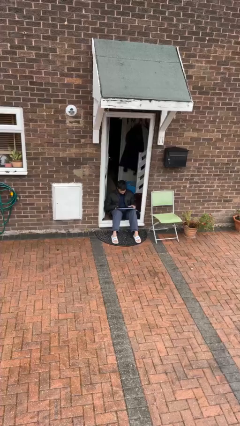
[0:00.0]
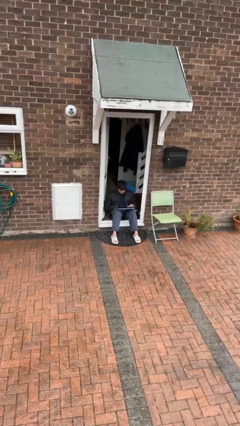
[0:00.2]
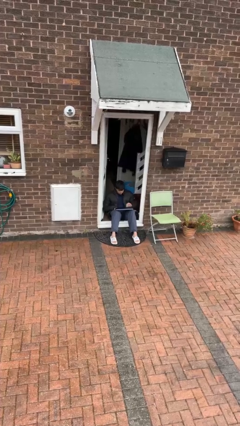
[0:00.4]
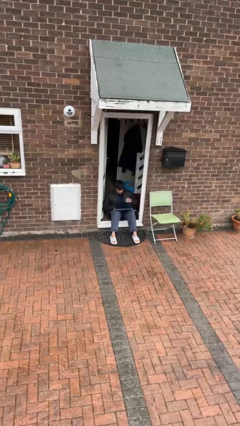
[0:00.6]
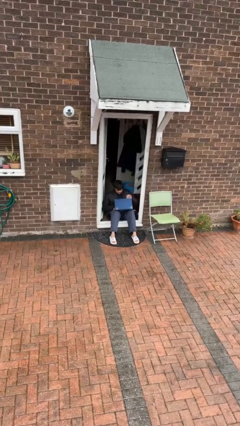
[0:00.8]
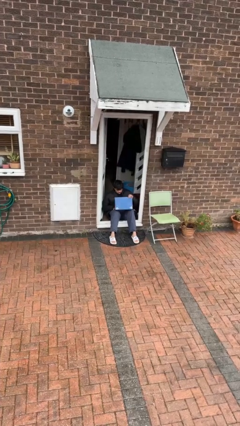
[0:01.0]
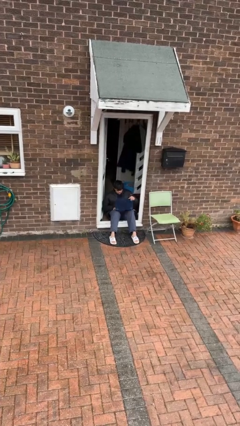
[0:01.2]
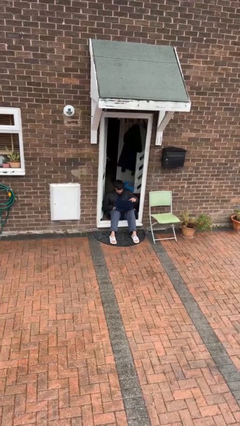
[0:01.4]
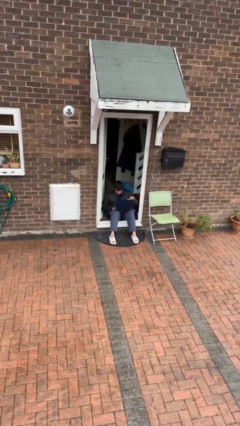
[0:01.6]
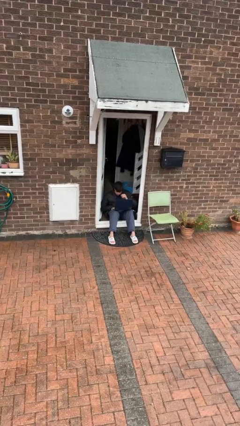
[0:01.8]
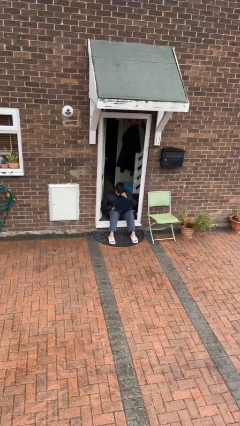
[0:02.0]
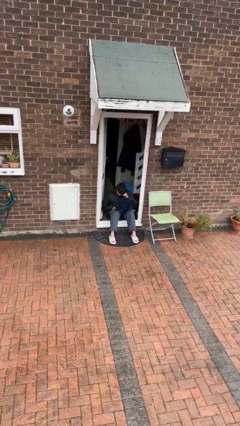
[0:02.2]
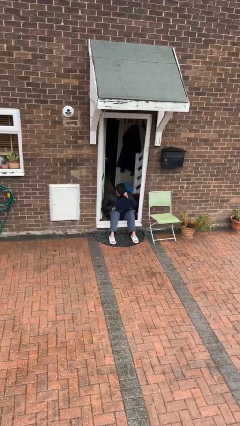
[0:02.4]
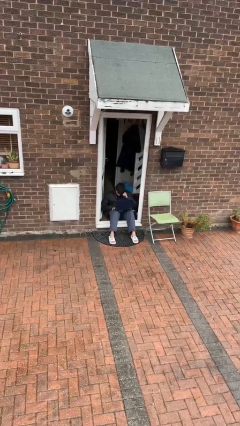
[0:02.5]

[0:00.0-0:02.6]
person opens laptop

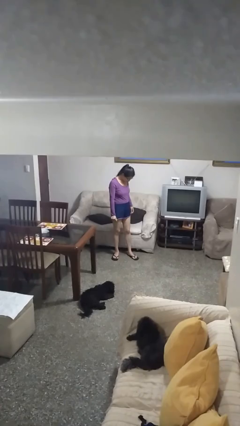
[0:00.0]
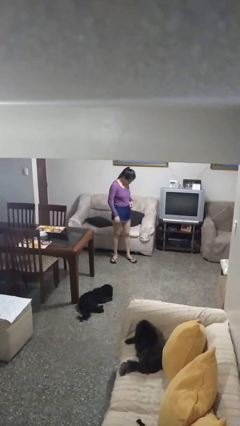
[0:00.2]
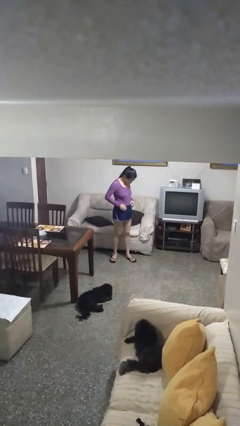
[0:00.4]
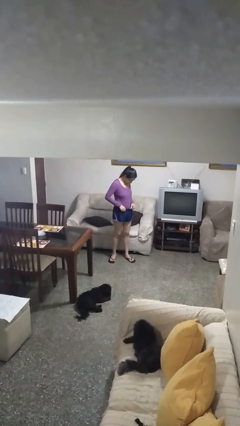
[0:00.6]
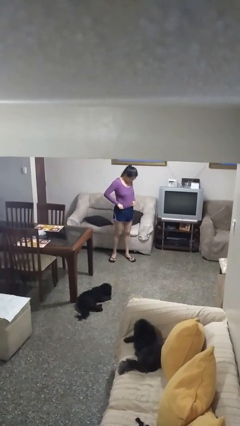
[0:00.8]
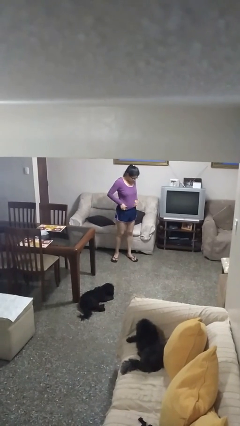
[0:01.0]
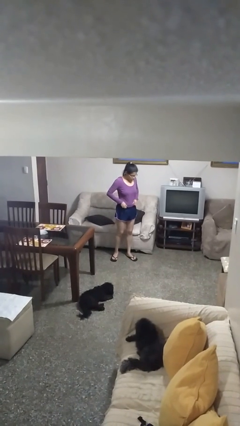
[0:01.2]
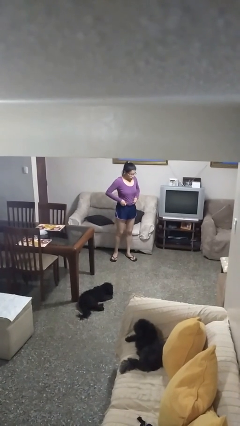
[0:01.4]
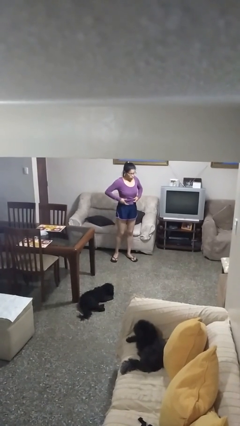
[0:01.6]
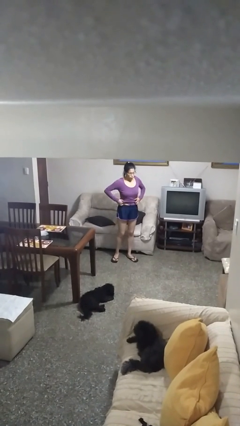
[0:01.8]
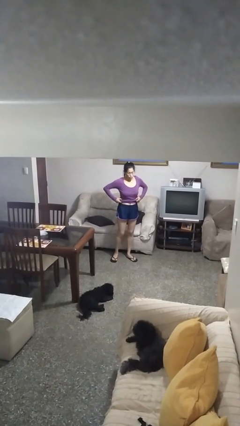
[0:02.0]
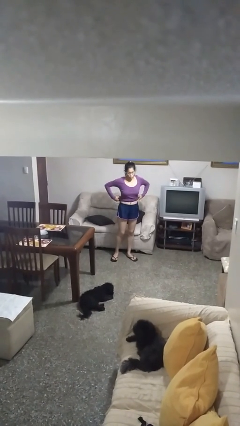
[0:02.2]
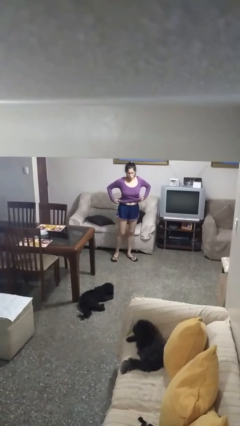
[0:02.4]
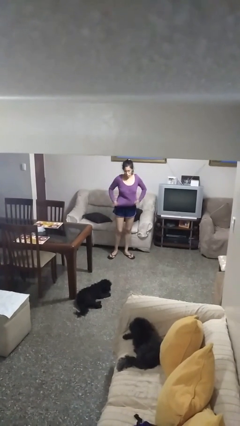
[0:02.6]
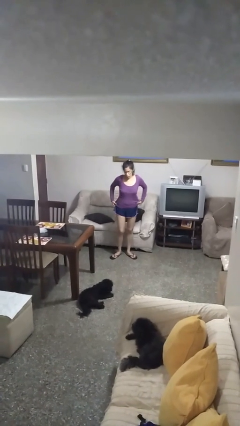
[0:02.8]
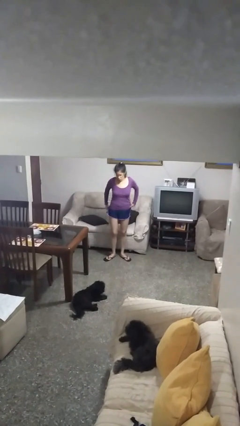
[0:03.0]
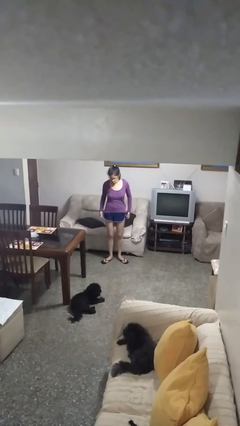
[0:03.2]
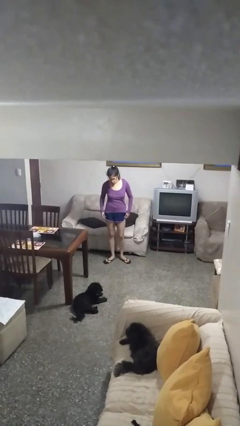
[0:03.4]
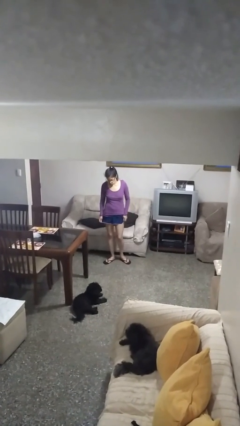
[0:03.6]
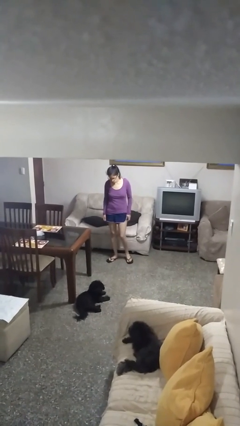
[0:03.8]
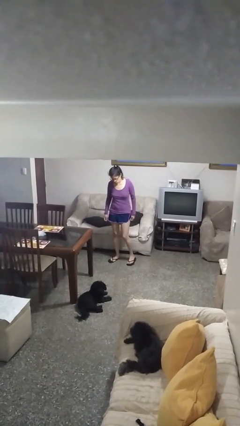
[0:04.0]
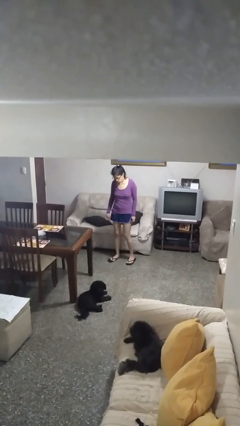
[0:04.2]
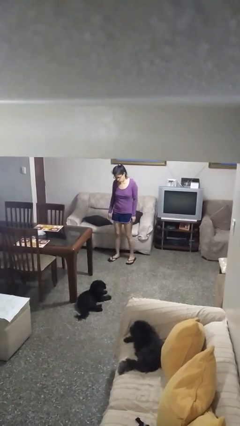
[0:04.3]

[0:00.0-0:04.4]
person untucks shirt

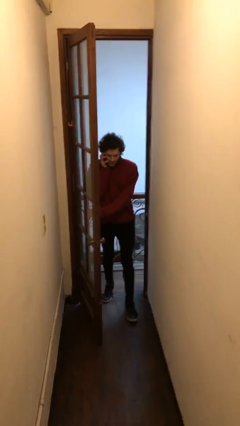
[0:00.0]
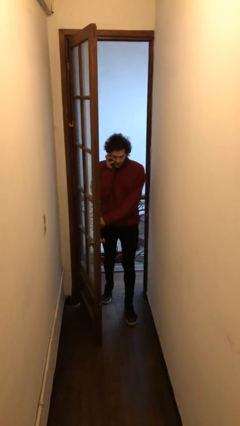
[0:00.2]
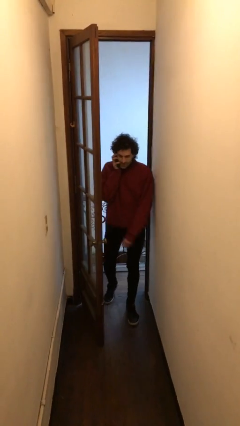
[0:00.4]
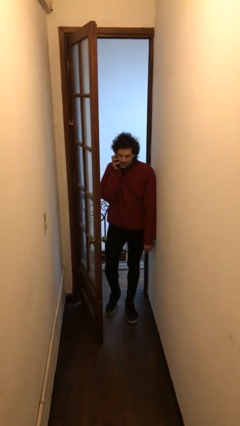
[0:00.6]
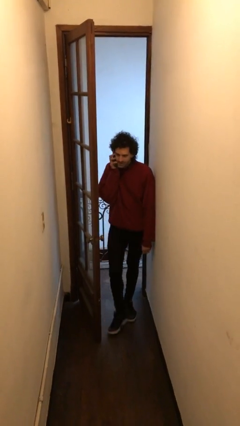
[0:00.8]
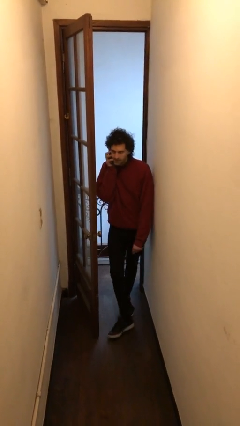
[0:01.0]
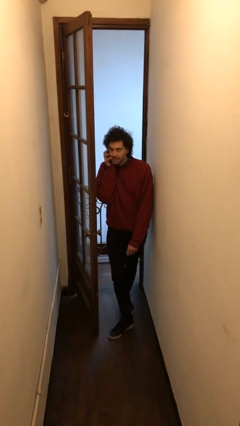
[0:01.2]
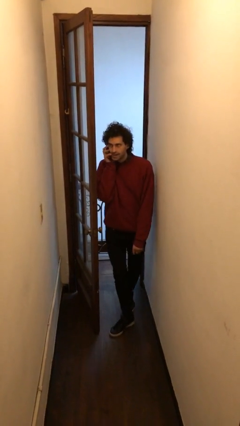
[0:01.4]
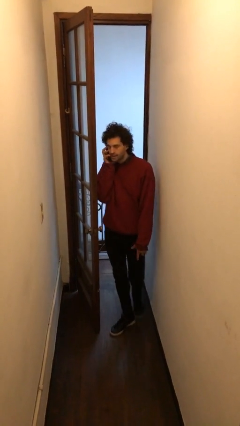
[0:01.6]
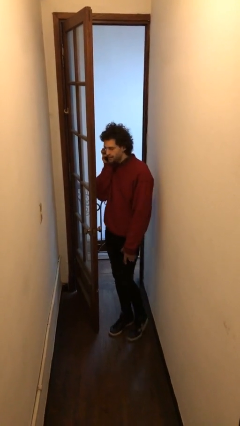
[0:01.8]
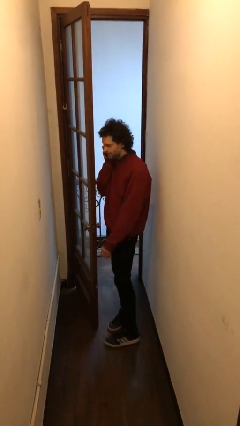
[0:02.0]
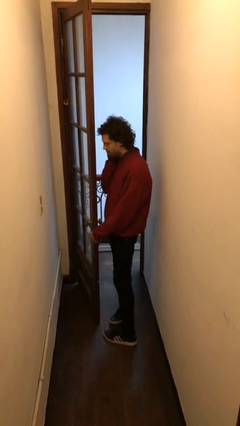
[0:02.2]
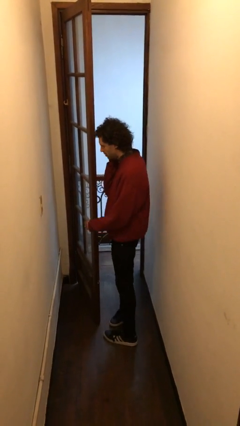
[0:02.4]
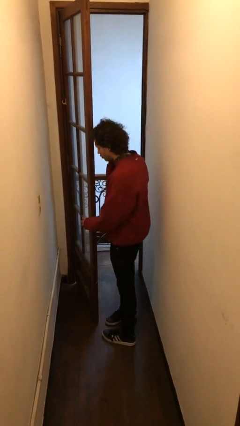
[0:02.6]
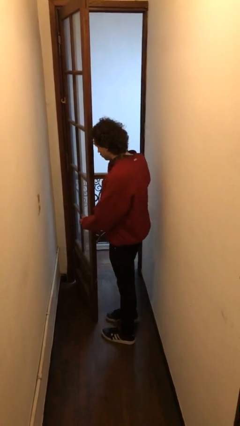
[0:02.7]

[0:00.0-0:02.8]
person enters scene through structure

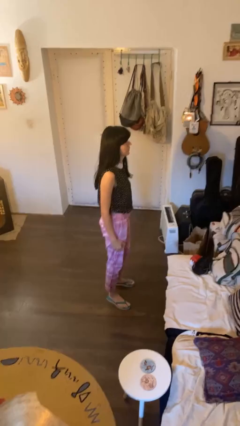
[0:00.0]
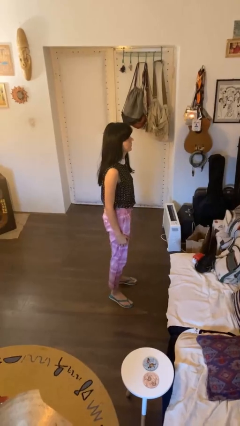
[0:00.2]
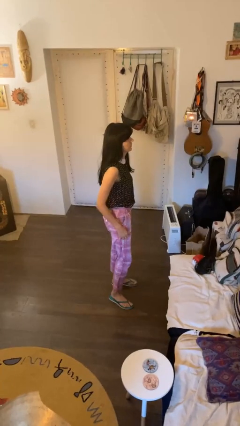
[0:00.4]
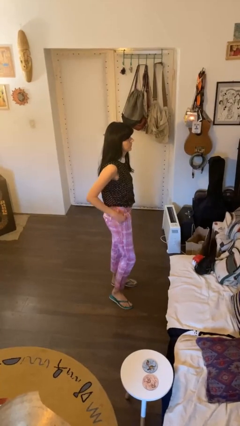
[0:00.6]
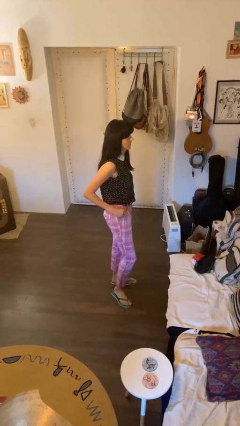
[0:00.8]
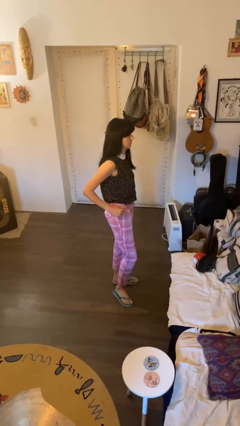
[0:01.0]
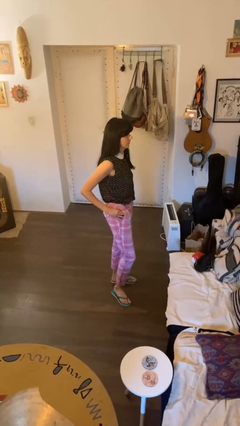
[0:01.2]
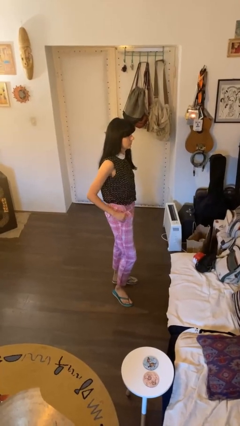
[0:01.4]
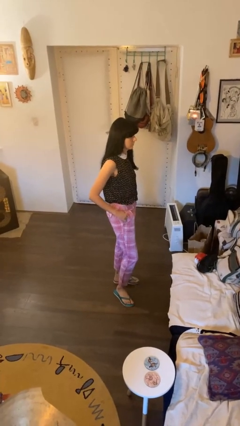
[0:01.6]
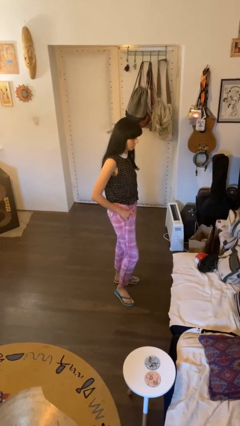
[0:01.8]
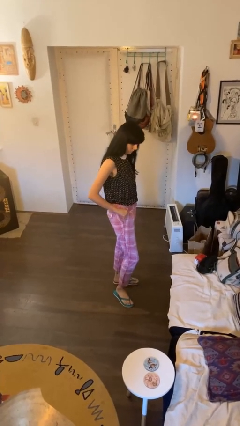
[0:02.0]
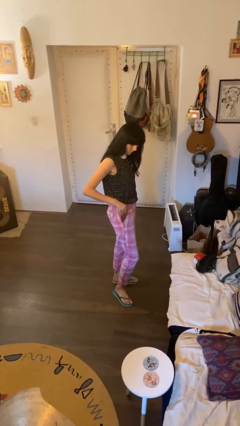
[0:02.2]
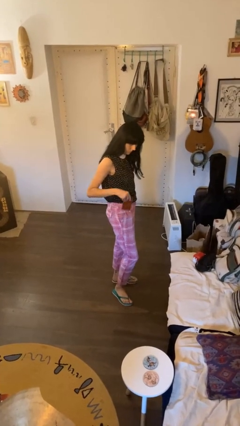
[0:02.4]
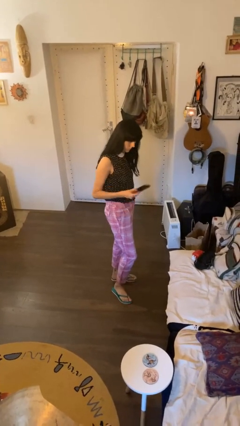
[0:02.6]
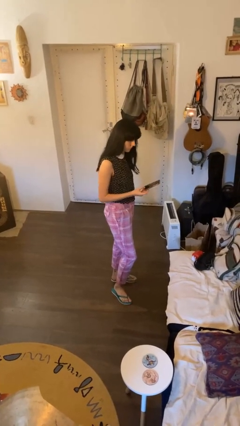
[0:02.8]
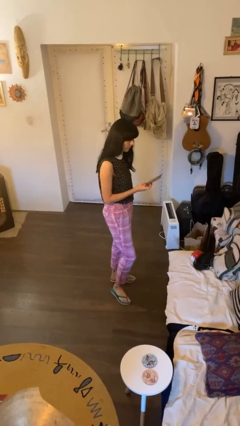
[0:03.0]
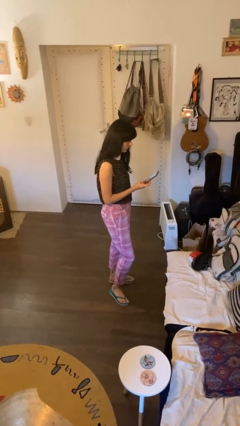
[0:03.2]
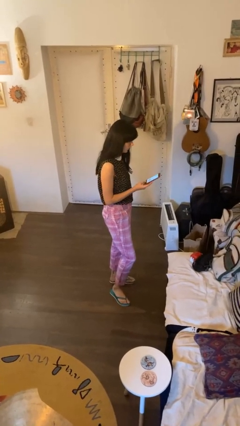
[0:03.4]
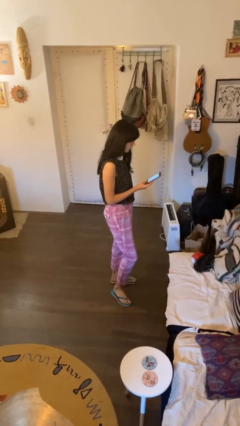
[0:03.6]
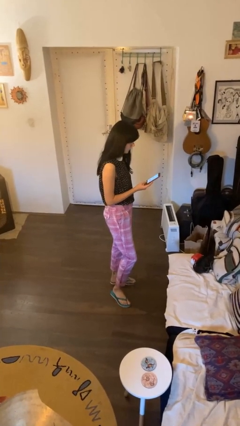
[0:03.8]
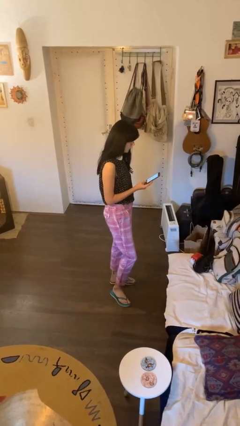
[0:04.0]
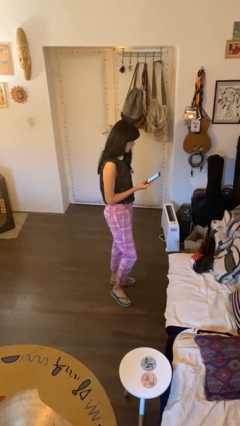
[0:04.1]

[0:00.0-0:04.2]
person takes phone from pocket

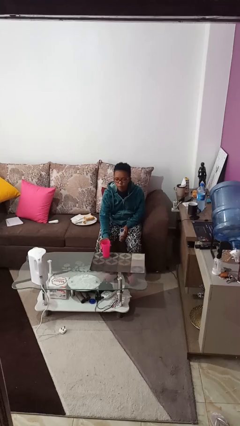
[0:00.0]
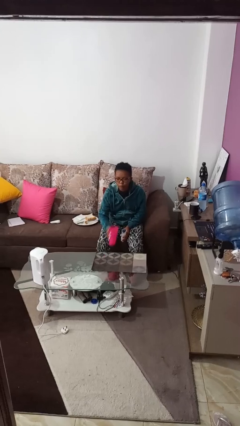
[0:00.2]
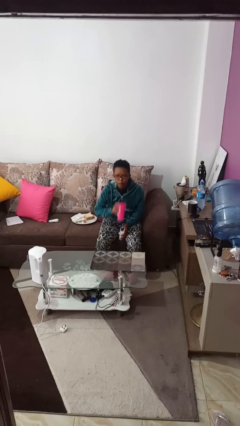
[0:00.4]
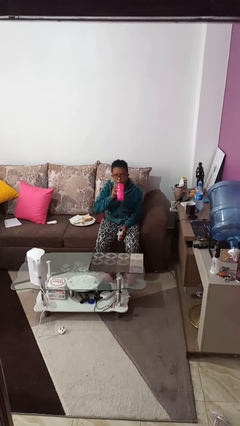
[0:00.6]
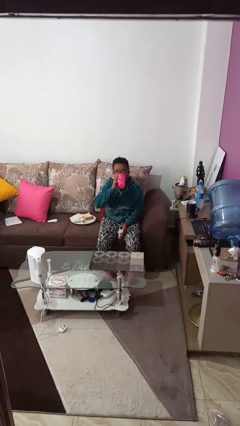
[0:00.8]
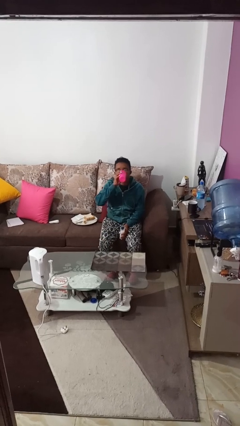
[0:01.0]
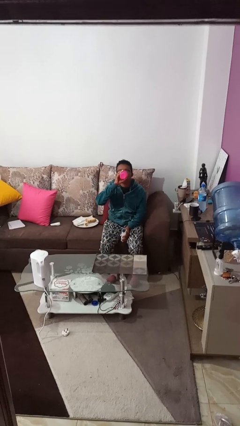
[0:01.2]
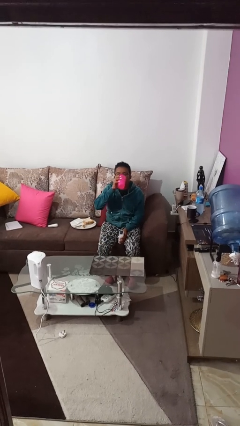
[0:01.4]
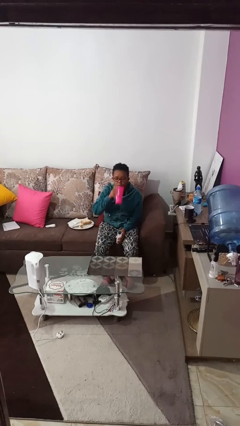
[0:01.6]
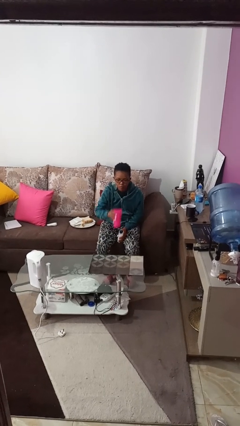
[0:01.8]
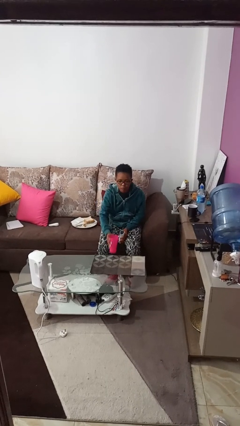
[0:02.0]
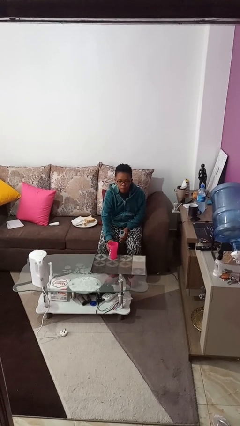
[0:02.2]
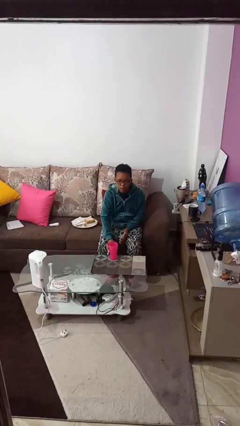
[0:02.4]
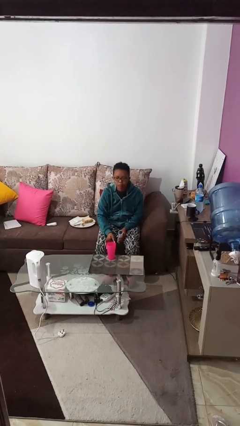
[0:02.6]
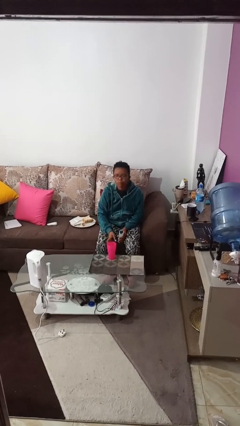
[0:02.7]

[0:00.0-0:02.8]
person drinks from cup

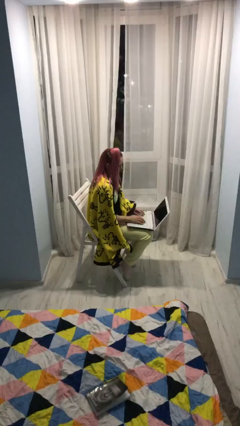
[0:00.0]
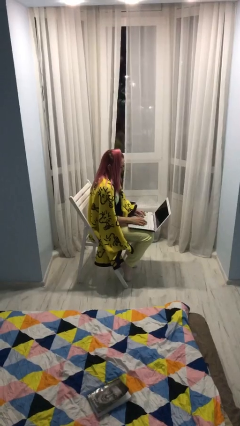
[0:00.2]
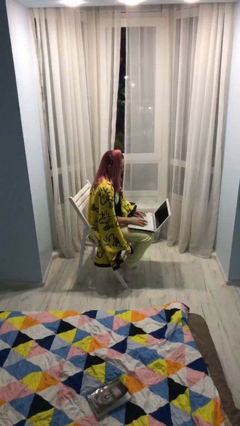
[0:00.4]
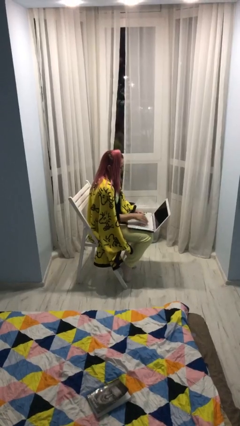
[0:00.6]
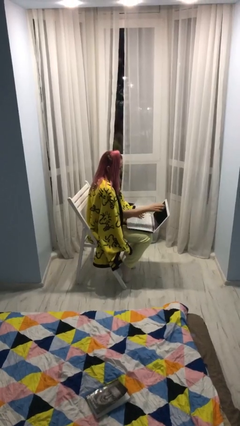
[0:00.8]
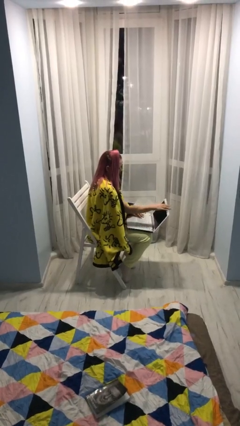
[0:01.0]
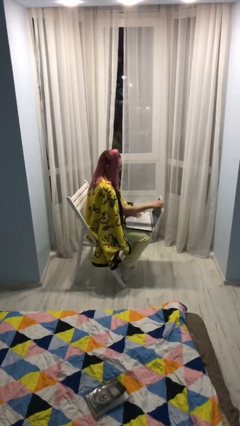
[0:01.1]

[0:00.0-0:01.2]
person interacts with laptop
